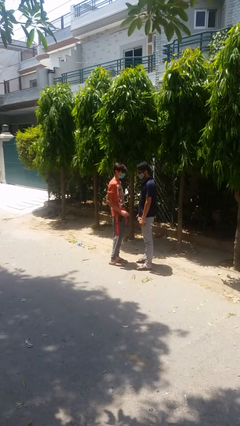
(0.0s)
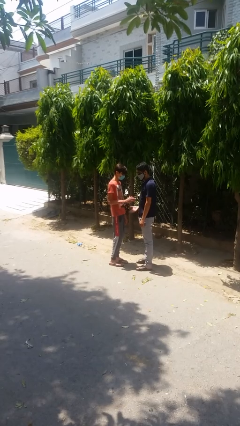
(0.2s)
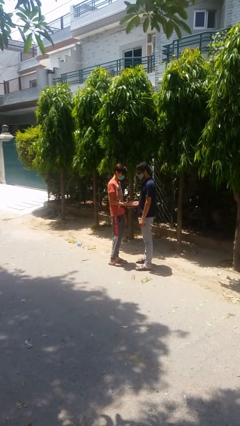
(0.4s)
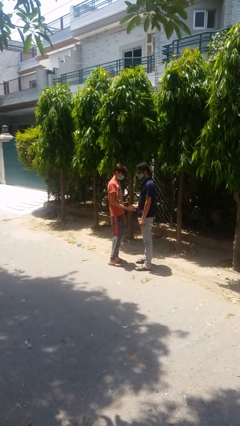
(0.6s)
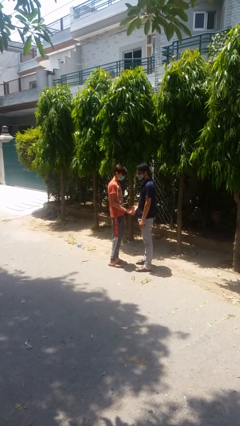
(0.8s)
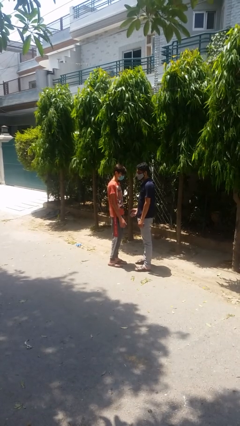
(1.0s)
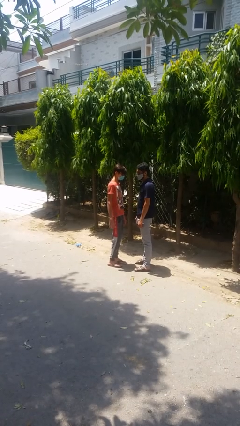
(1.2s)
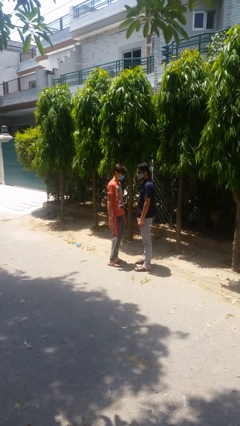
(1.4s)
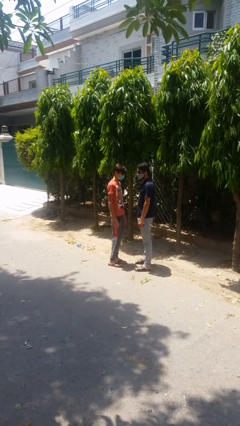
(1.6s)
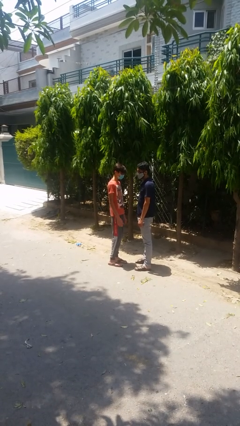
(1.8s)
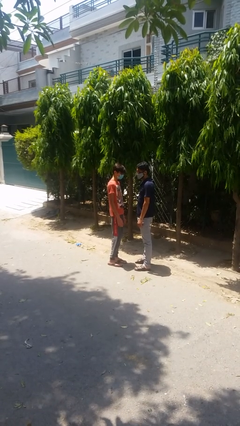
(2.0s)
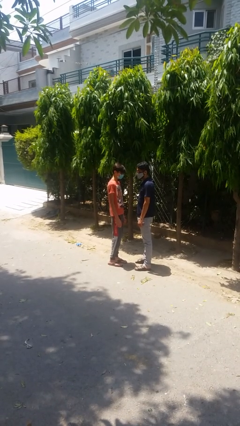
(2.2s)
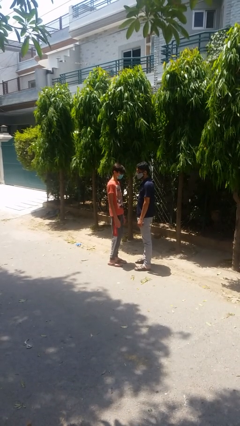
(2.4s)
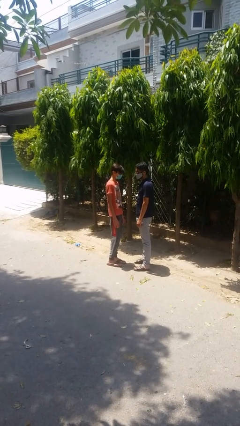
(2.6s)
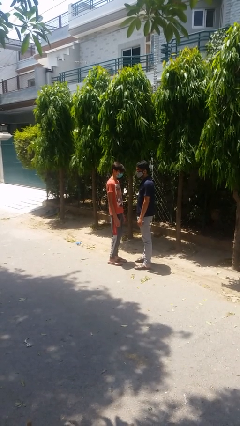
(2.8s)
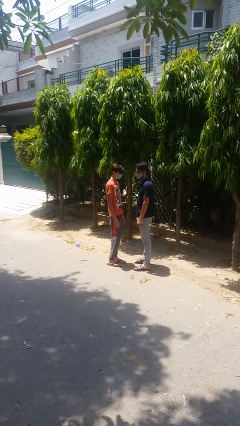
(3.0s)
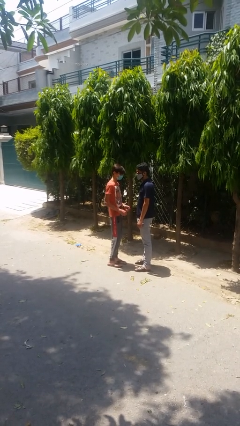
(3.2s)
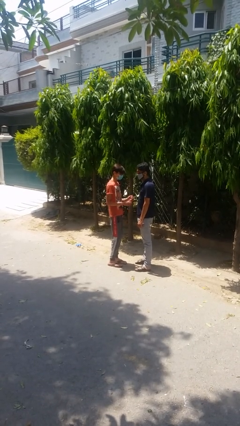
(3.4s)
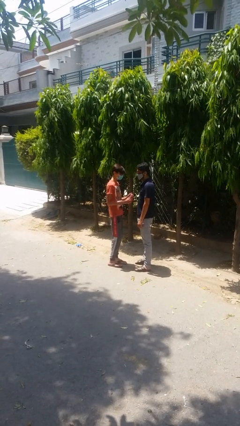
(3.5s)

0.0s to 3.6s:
person highfives hand

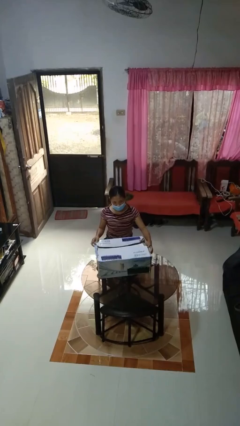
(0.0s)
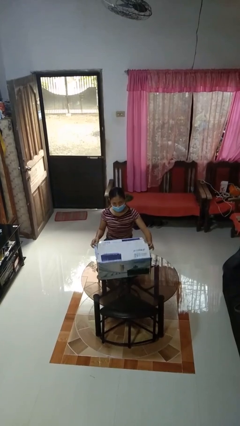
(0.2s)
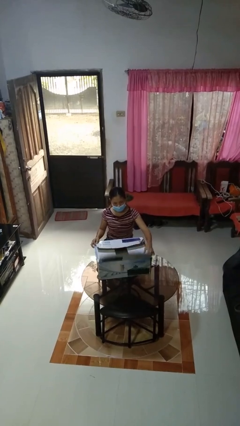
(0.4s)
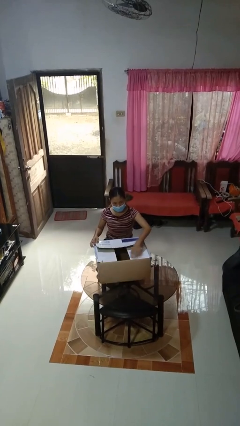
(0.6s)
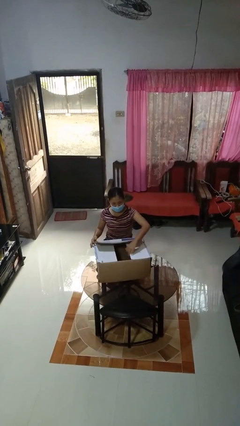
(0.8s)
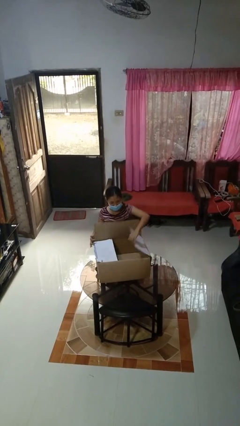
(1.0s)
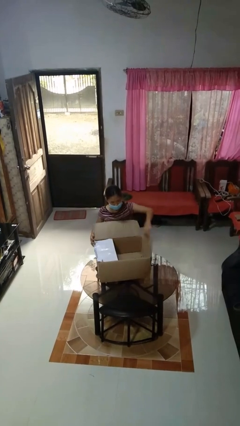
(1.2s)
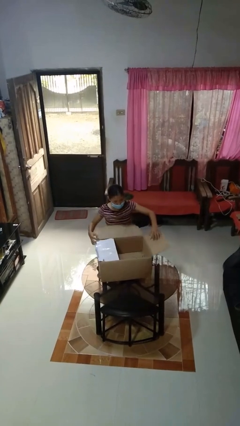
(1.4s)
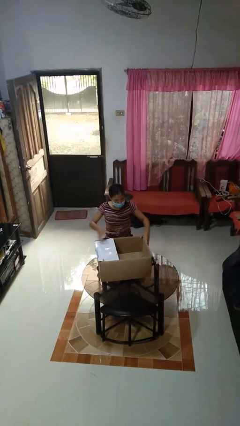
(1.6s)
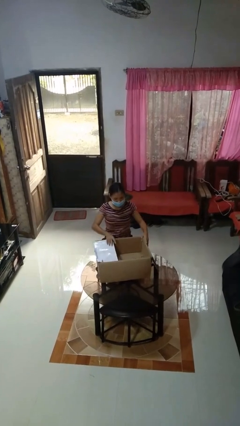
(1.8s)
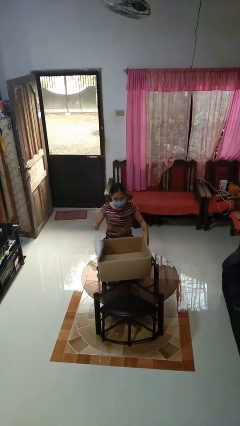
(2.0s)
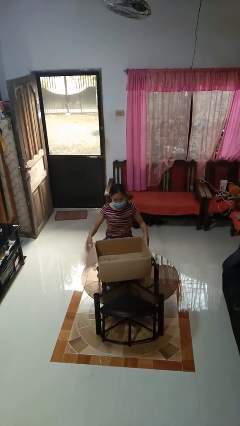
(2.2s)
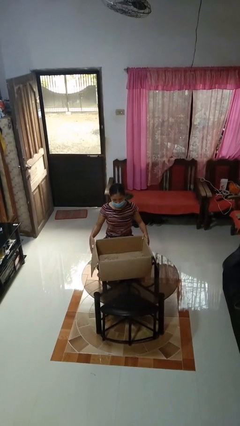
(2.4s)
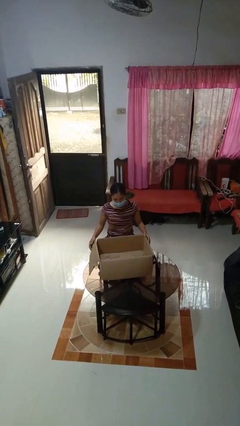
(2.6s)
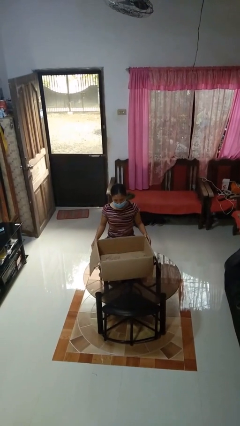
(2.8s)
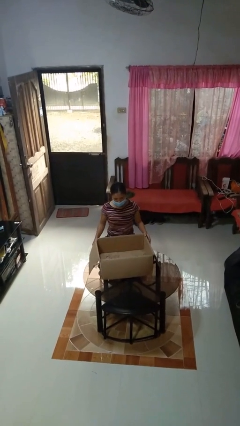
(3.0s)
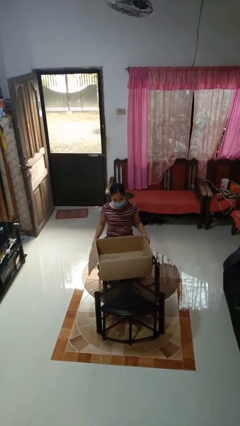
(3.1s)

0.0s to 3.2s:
person opens box

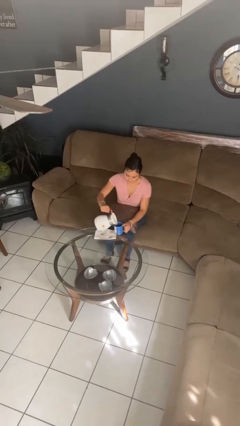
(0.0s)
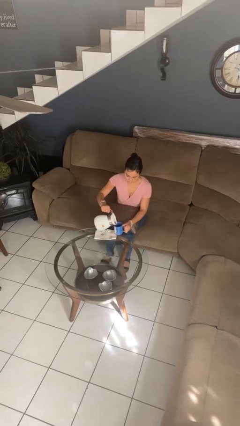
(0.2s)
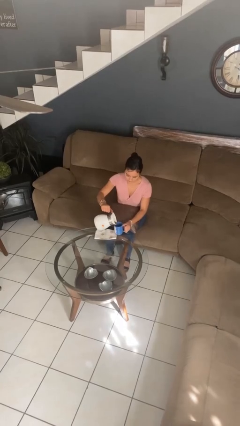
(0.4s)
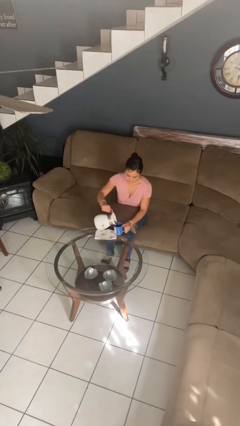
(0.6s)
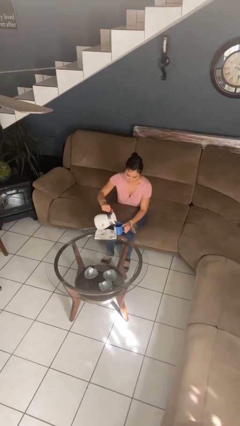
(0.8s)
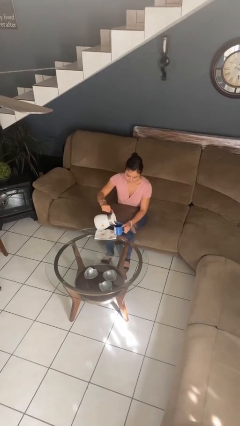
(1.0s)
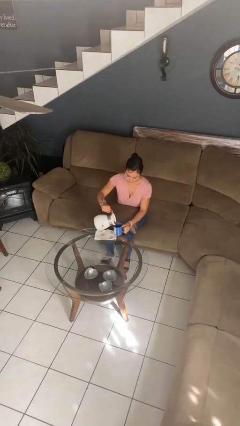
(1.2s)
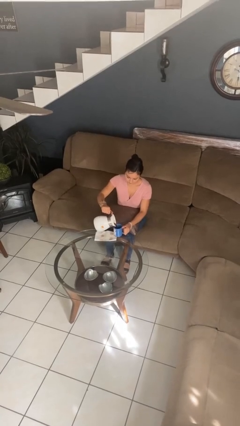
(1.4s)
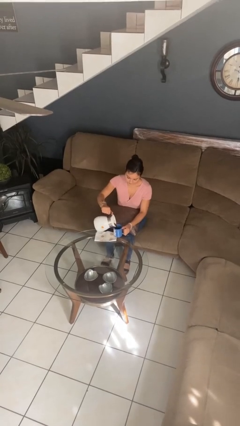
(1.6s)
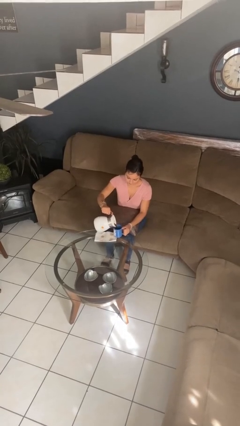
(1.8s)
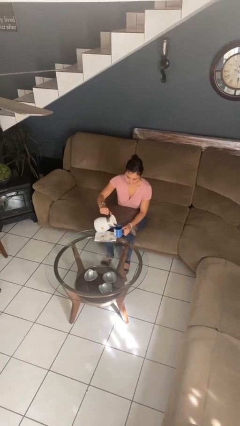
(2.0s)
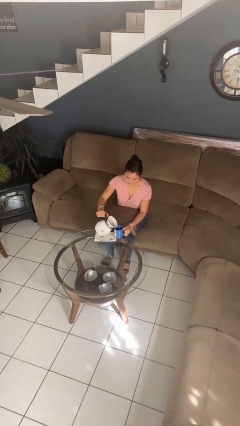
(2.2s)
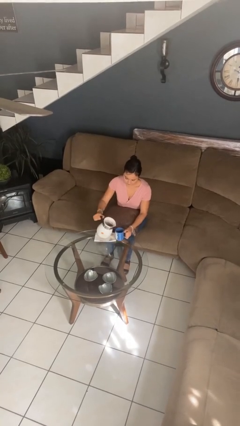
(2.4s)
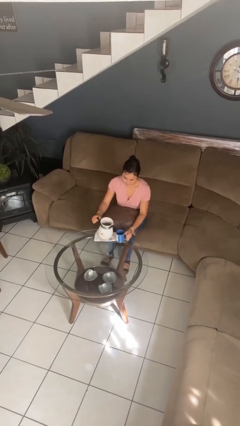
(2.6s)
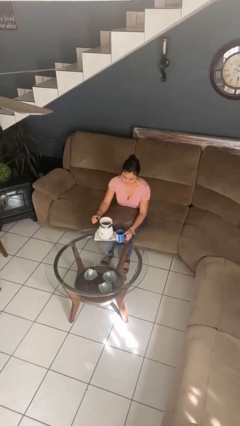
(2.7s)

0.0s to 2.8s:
person pours coffee into mug

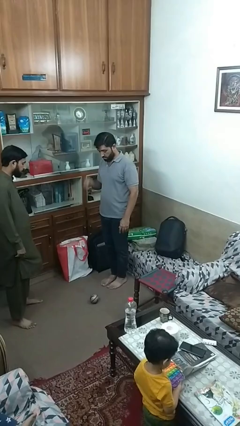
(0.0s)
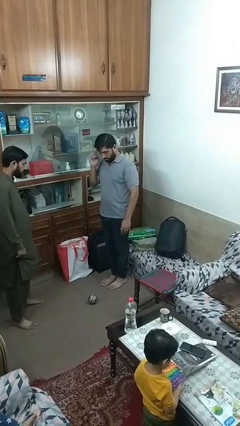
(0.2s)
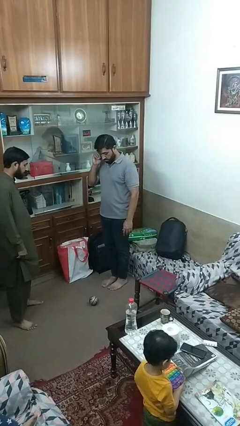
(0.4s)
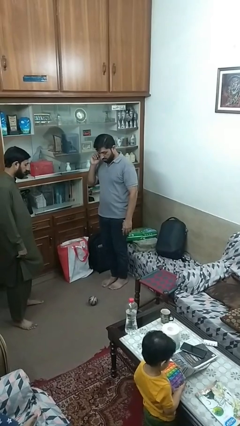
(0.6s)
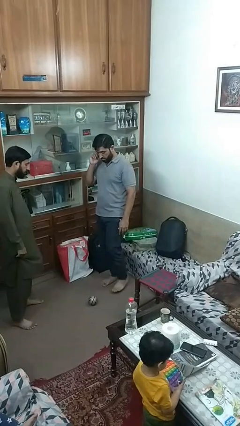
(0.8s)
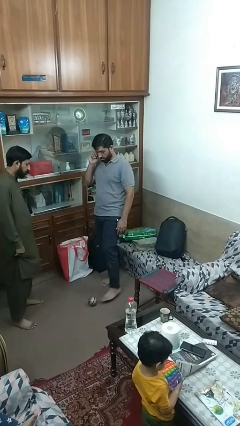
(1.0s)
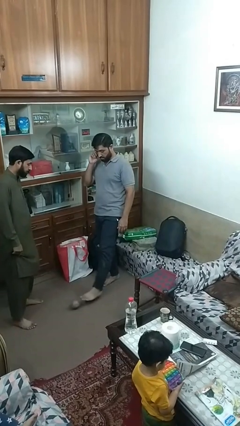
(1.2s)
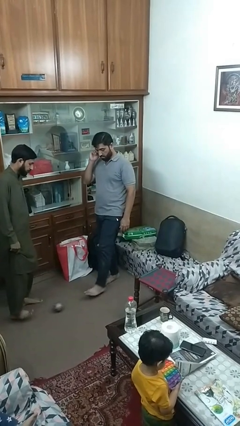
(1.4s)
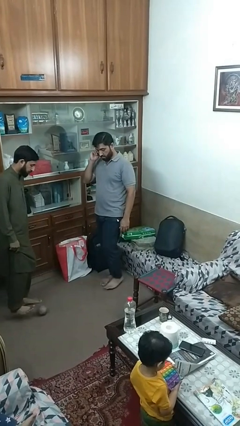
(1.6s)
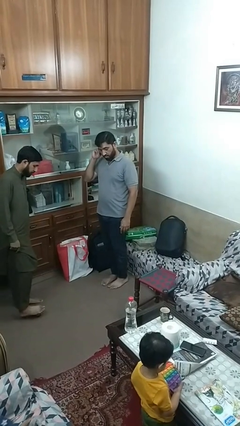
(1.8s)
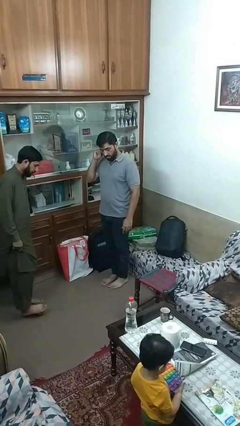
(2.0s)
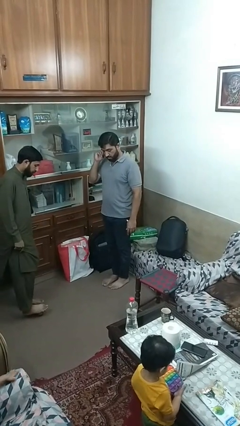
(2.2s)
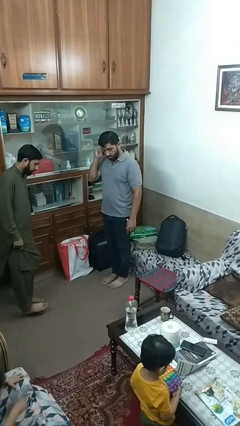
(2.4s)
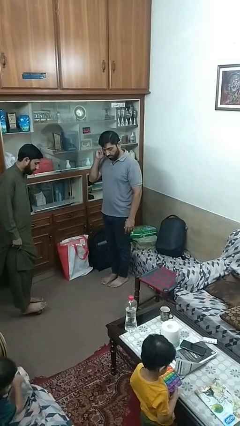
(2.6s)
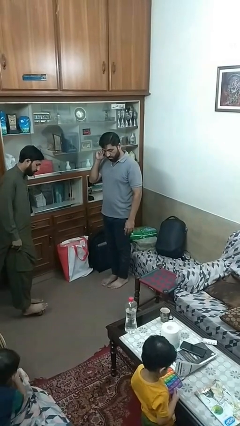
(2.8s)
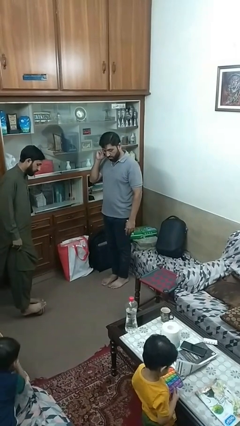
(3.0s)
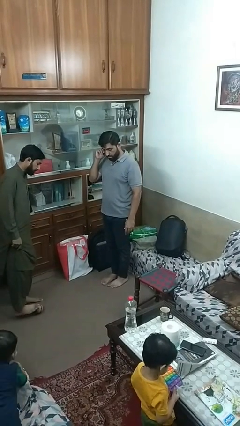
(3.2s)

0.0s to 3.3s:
person kicks object to person

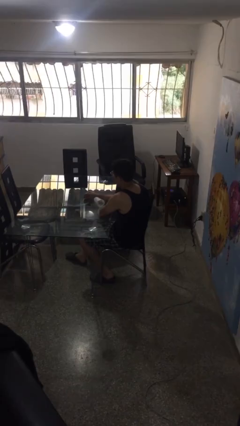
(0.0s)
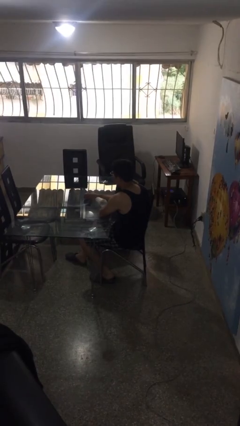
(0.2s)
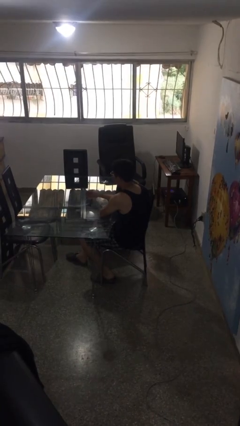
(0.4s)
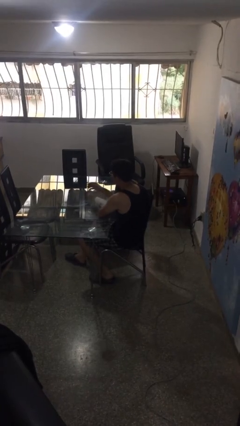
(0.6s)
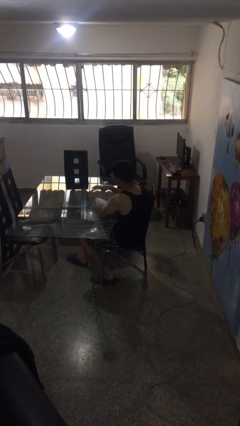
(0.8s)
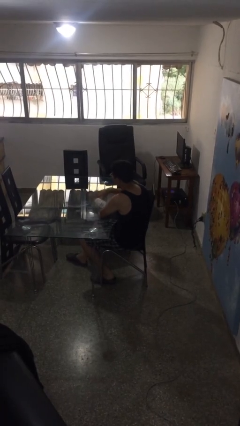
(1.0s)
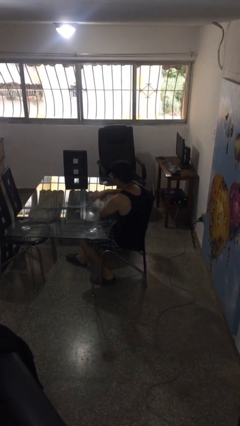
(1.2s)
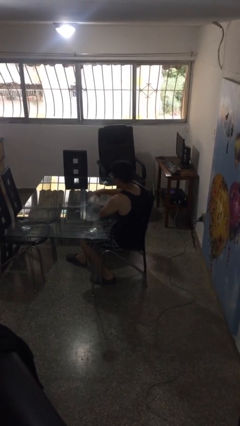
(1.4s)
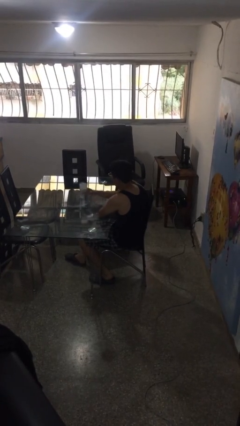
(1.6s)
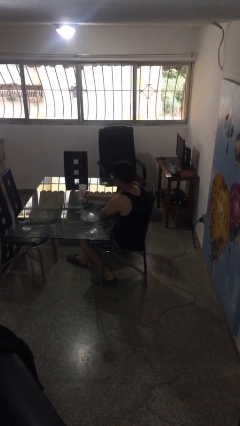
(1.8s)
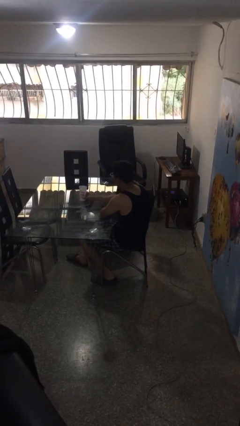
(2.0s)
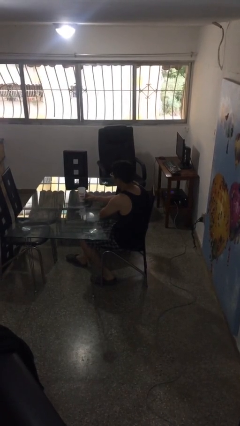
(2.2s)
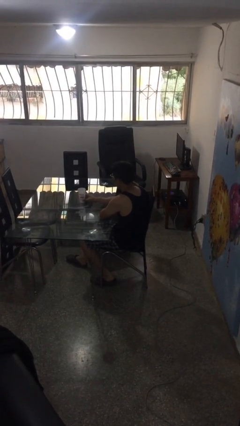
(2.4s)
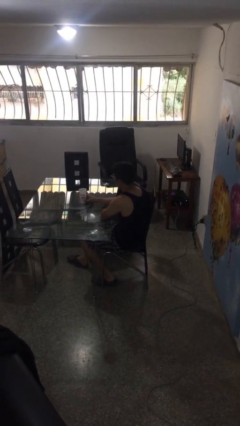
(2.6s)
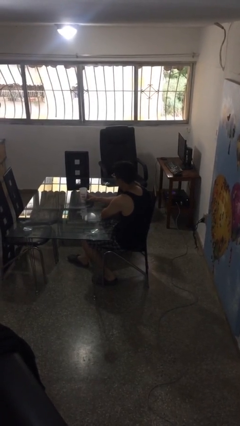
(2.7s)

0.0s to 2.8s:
person sets upright glass

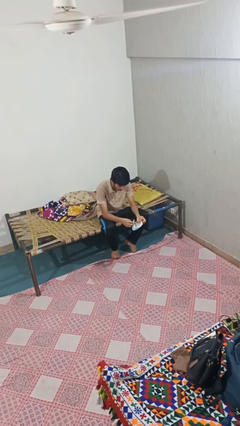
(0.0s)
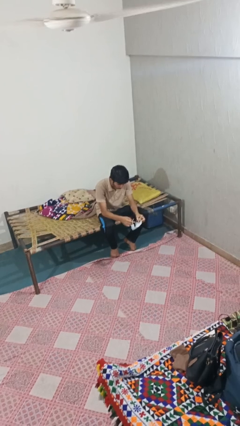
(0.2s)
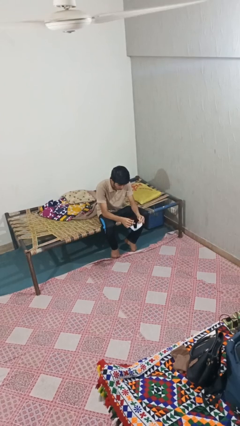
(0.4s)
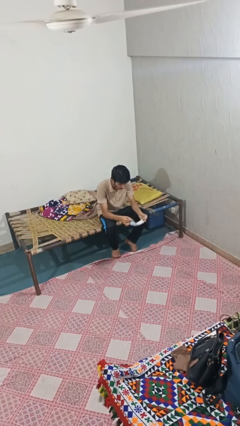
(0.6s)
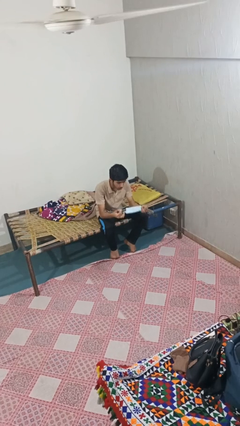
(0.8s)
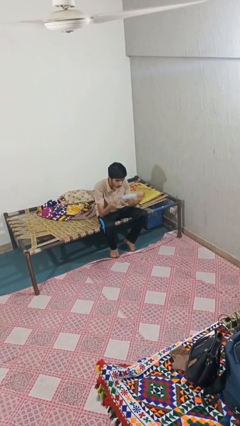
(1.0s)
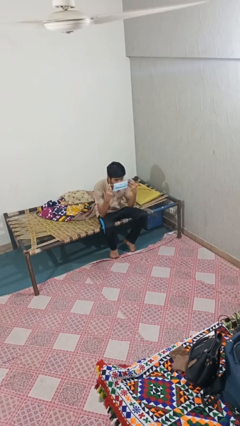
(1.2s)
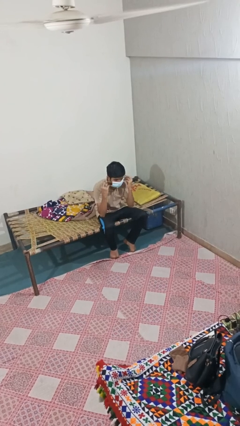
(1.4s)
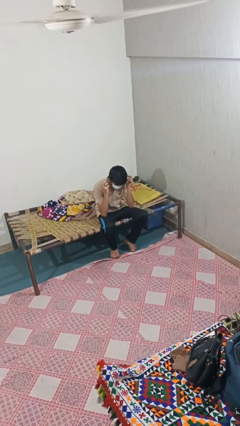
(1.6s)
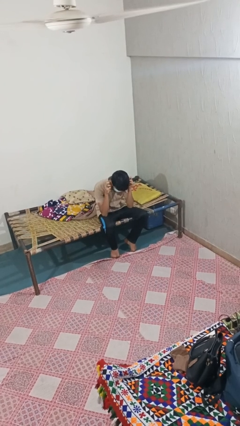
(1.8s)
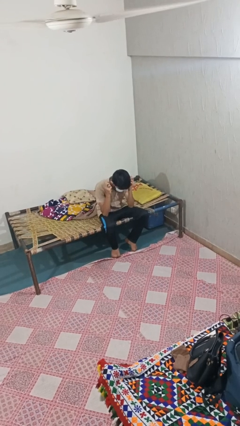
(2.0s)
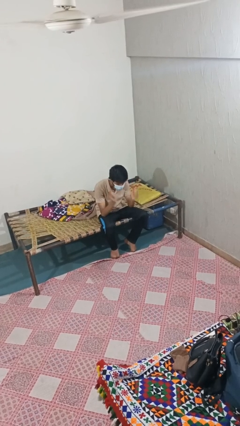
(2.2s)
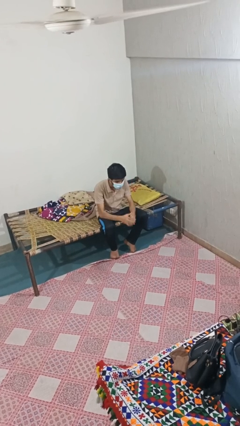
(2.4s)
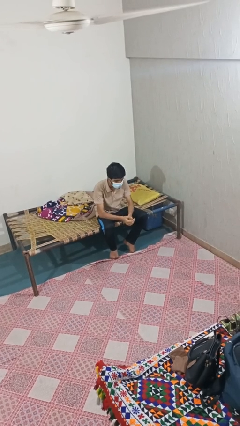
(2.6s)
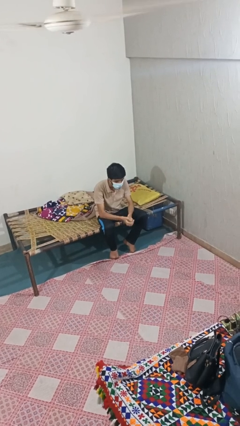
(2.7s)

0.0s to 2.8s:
person puts on facemask
